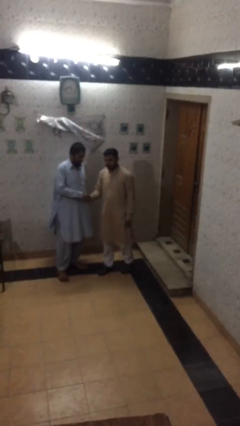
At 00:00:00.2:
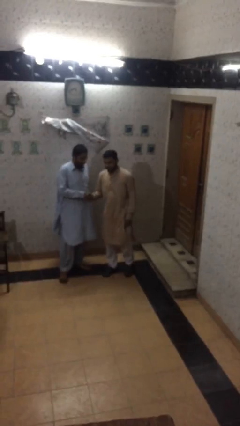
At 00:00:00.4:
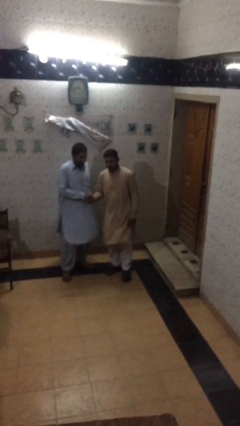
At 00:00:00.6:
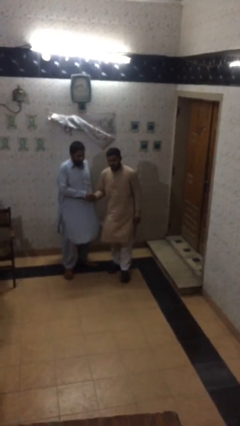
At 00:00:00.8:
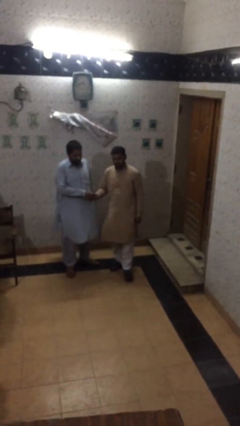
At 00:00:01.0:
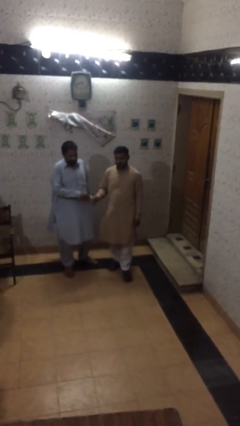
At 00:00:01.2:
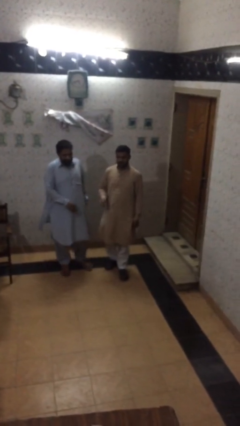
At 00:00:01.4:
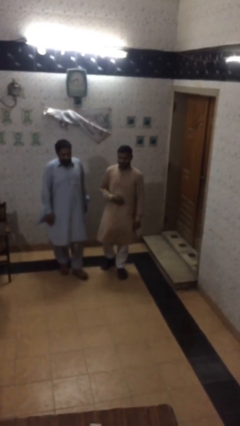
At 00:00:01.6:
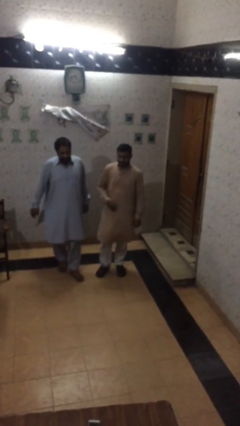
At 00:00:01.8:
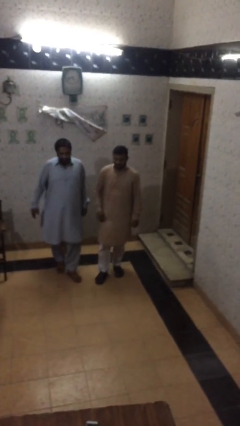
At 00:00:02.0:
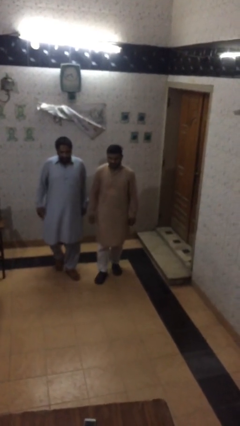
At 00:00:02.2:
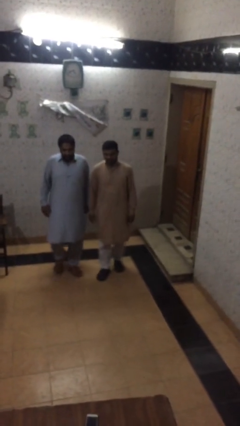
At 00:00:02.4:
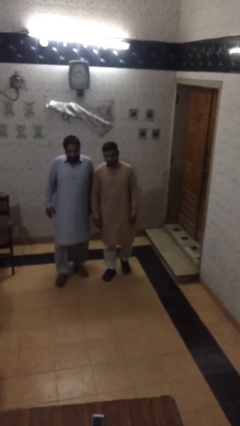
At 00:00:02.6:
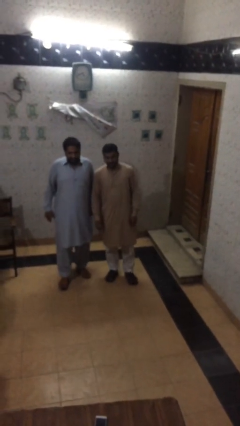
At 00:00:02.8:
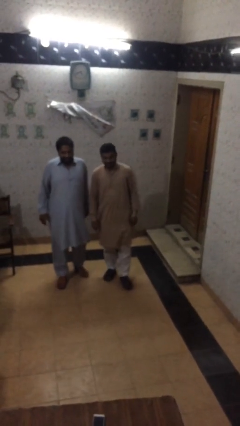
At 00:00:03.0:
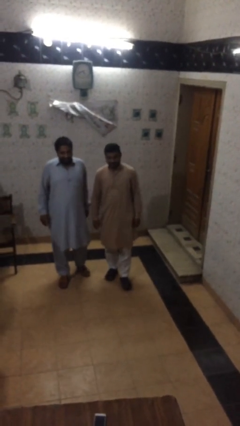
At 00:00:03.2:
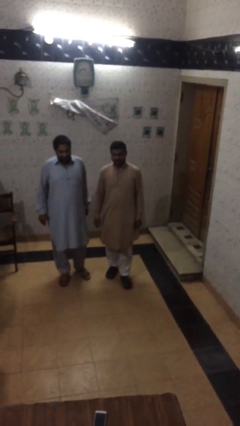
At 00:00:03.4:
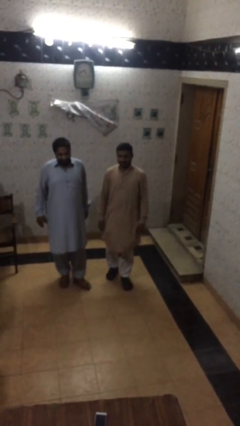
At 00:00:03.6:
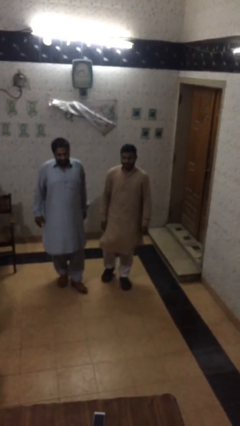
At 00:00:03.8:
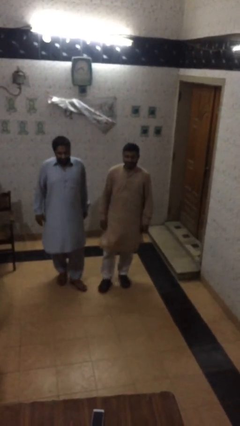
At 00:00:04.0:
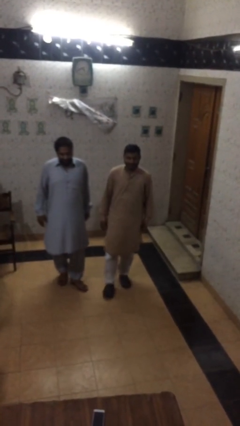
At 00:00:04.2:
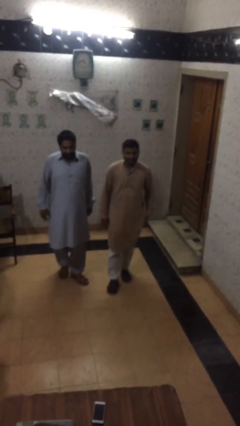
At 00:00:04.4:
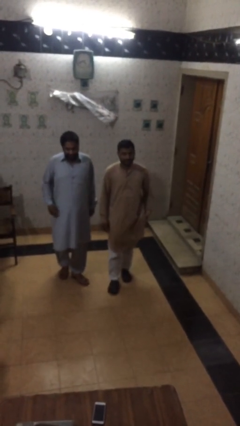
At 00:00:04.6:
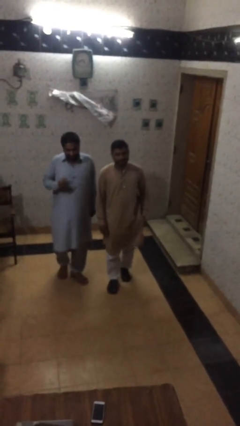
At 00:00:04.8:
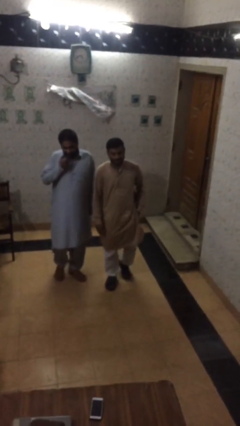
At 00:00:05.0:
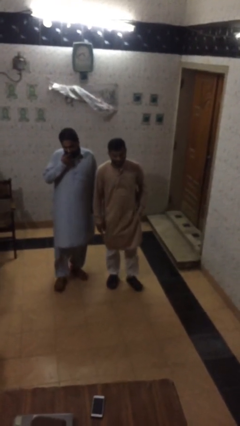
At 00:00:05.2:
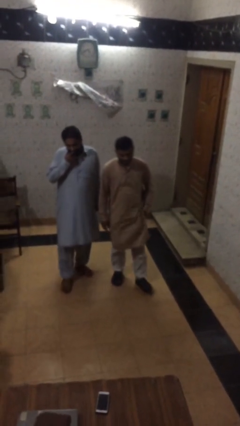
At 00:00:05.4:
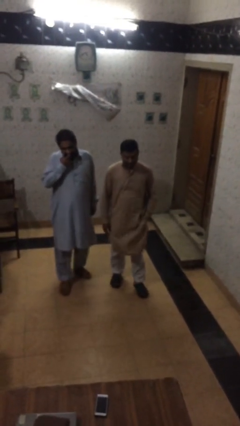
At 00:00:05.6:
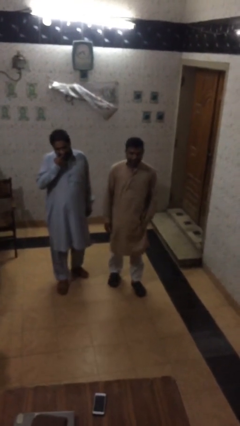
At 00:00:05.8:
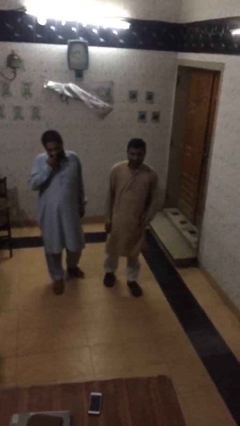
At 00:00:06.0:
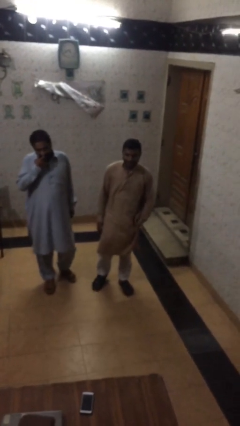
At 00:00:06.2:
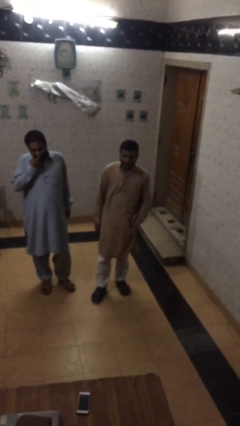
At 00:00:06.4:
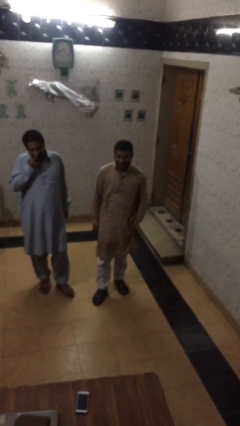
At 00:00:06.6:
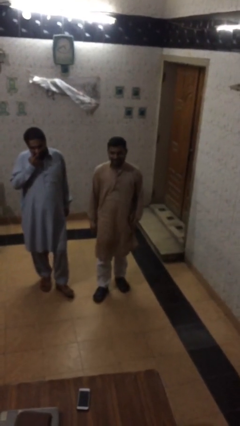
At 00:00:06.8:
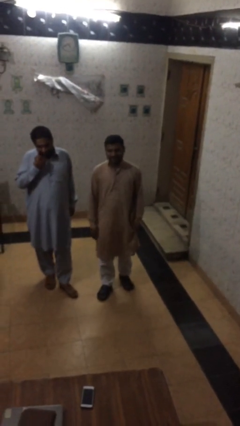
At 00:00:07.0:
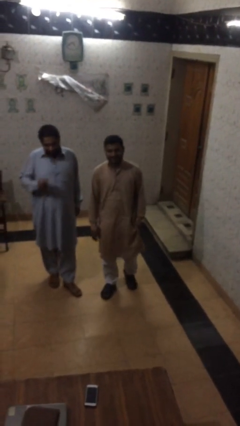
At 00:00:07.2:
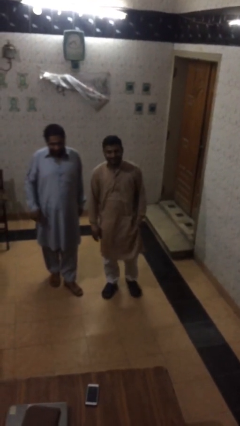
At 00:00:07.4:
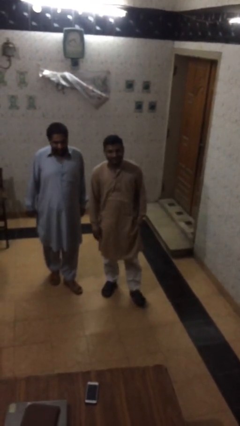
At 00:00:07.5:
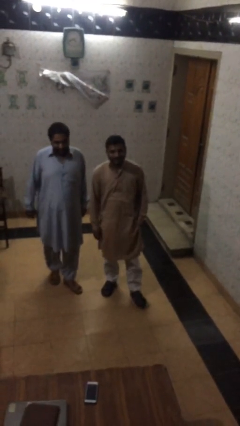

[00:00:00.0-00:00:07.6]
person talks to person

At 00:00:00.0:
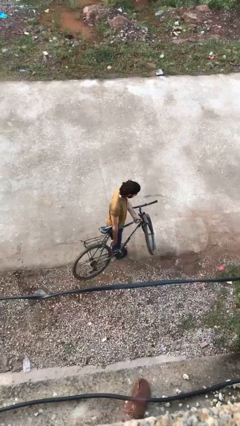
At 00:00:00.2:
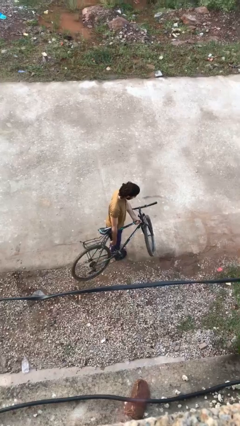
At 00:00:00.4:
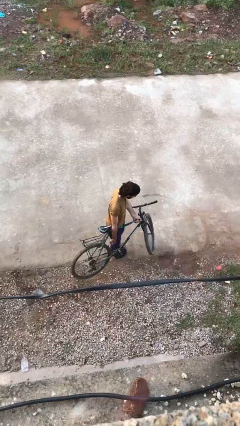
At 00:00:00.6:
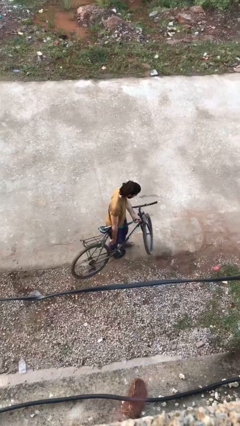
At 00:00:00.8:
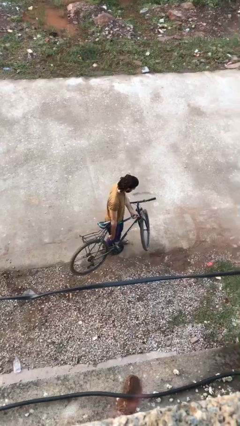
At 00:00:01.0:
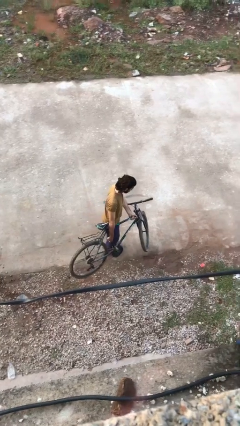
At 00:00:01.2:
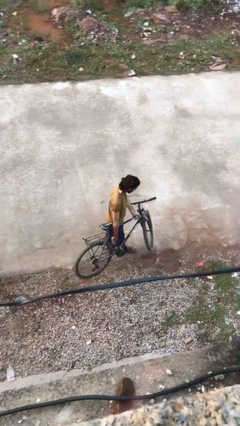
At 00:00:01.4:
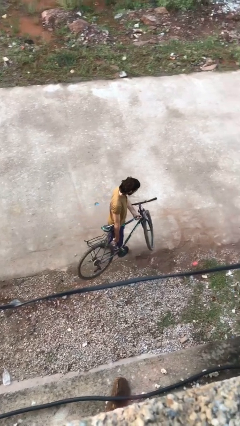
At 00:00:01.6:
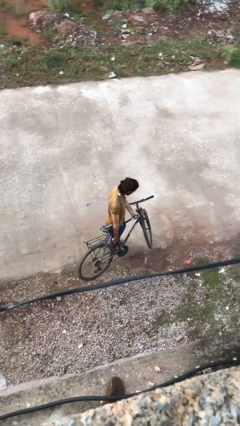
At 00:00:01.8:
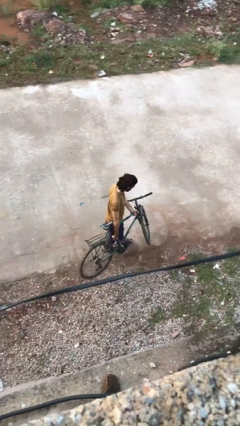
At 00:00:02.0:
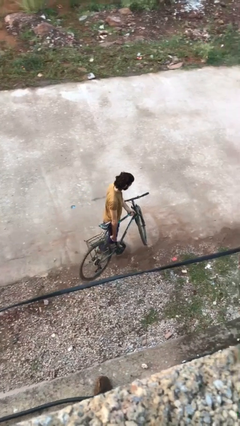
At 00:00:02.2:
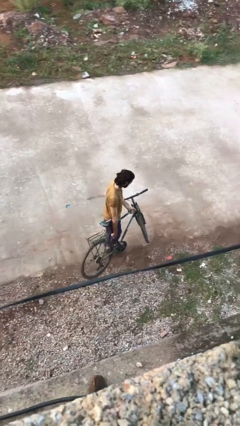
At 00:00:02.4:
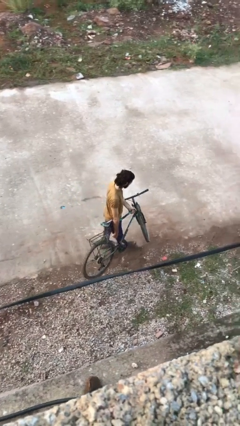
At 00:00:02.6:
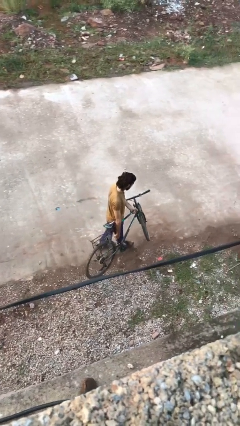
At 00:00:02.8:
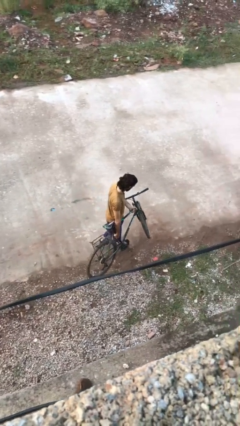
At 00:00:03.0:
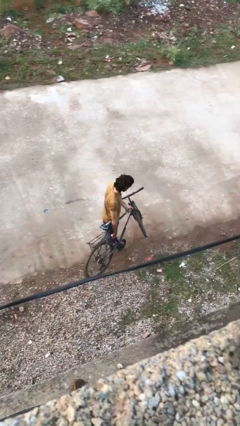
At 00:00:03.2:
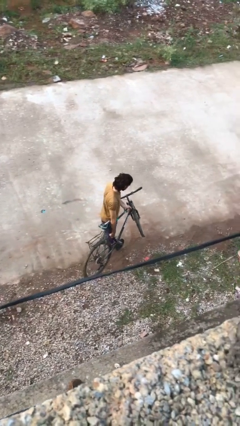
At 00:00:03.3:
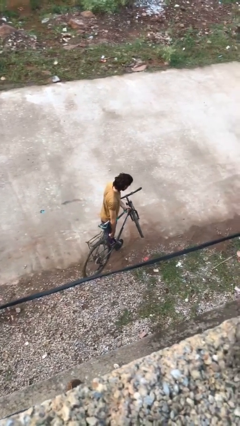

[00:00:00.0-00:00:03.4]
person carries bicycle

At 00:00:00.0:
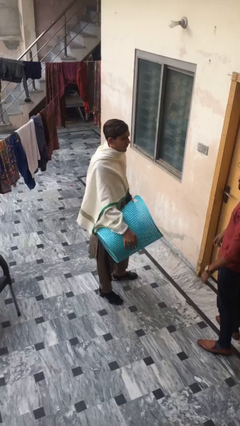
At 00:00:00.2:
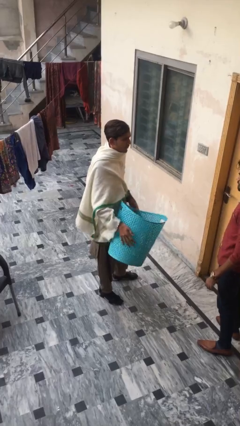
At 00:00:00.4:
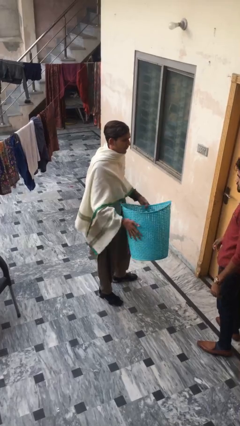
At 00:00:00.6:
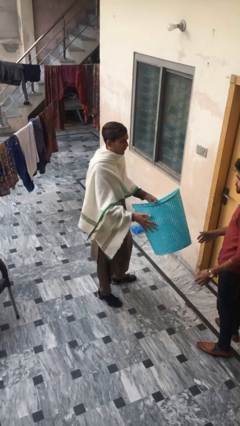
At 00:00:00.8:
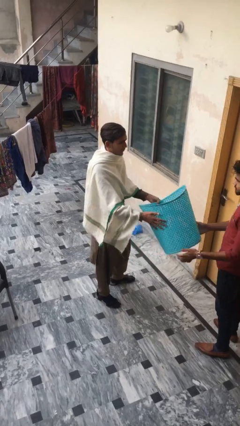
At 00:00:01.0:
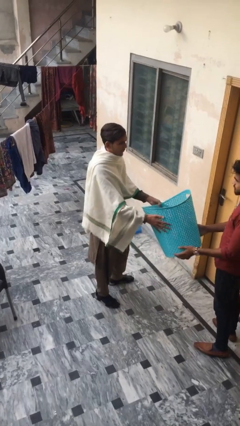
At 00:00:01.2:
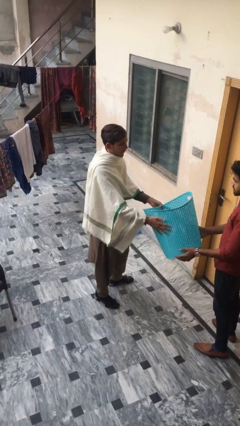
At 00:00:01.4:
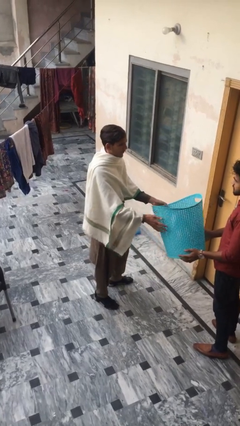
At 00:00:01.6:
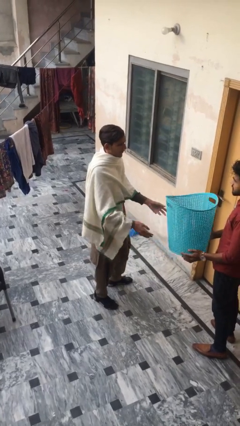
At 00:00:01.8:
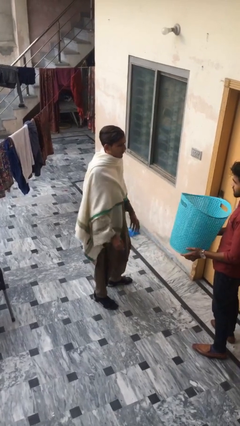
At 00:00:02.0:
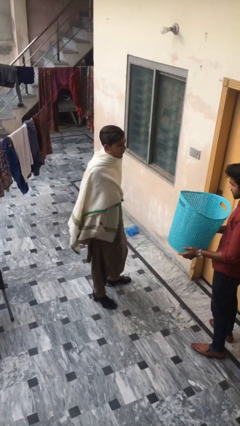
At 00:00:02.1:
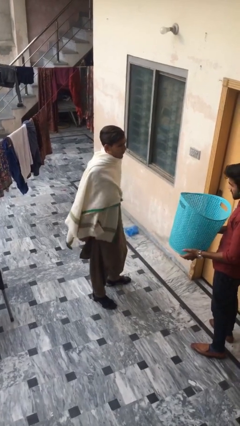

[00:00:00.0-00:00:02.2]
person transfers object to person

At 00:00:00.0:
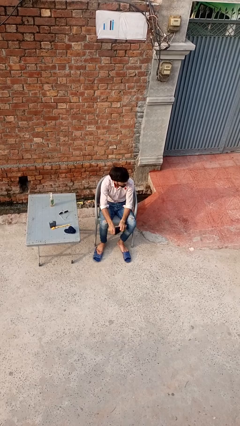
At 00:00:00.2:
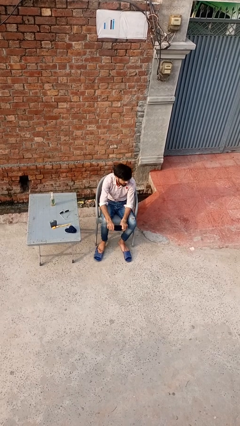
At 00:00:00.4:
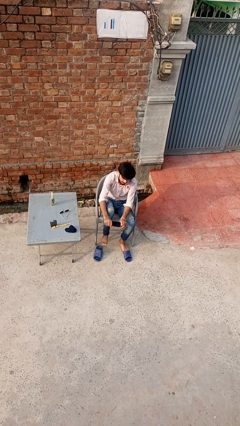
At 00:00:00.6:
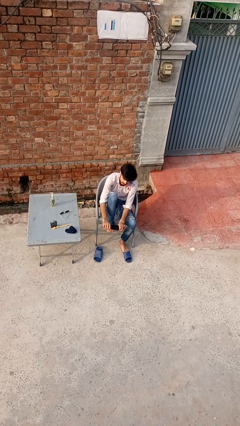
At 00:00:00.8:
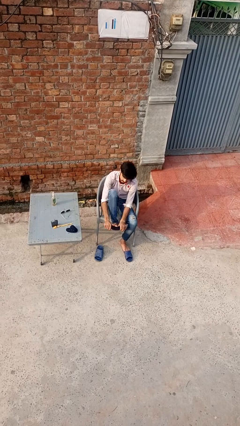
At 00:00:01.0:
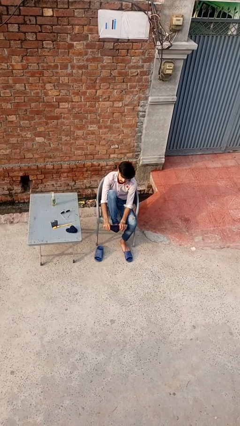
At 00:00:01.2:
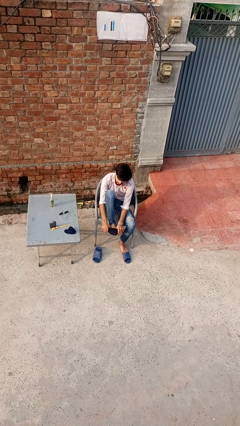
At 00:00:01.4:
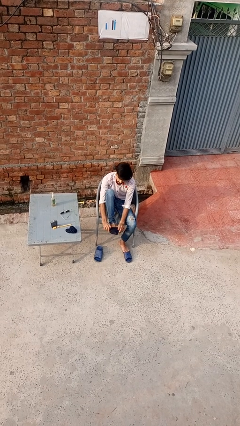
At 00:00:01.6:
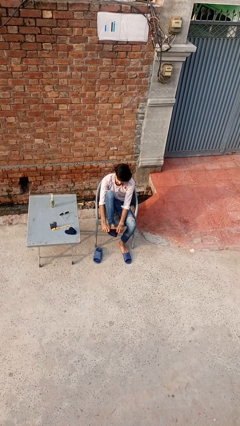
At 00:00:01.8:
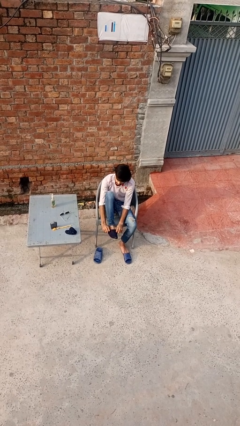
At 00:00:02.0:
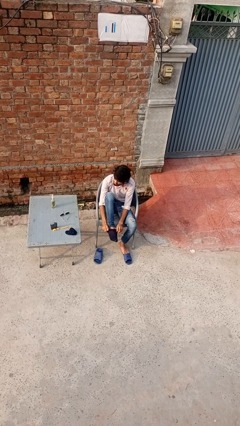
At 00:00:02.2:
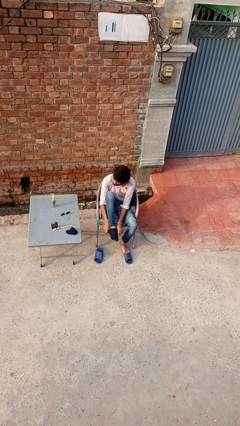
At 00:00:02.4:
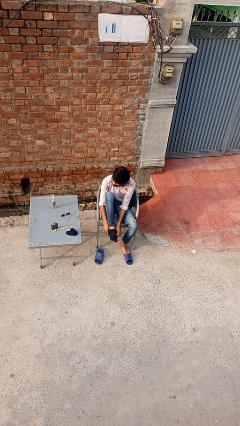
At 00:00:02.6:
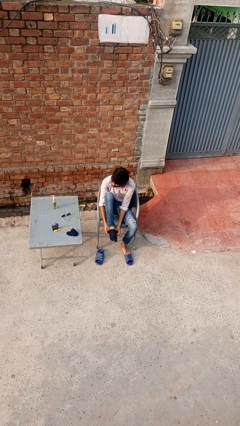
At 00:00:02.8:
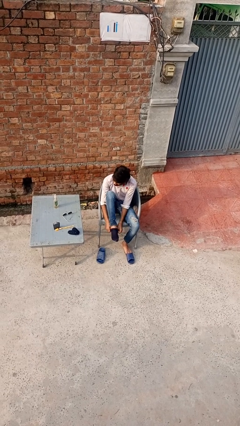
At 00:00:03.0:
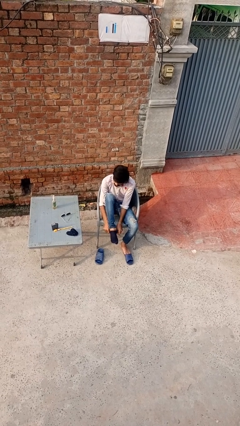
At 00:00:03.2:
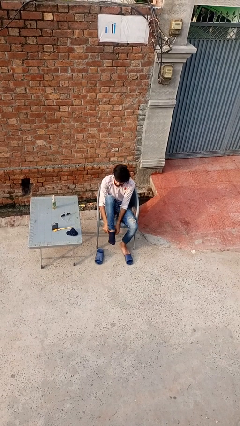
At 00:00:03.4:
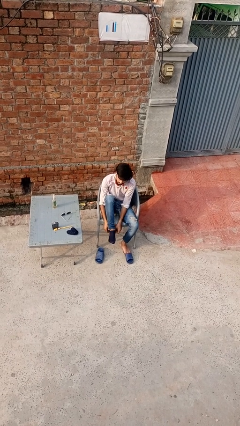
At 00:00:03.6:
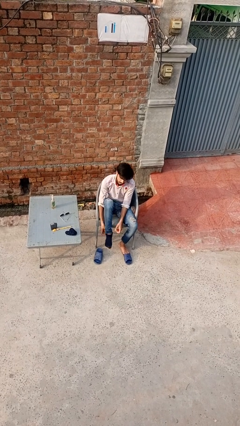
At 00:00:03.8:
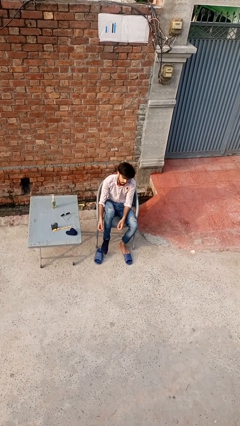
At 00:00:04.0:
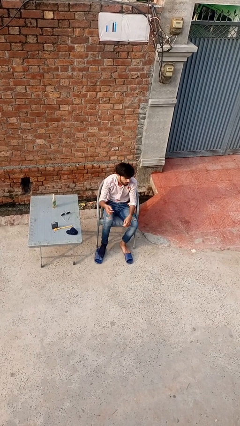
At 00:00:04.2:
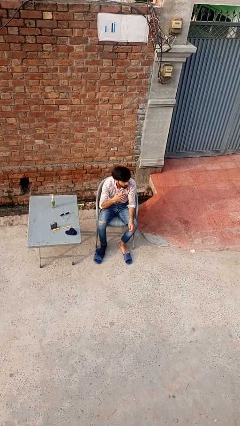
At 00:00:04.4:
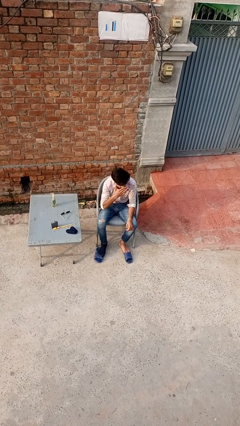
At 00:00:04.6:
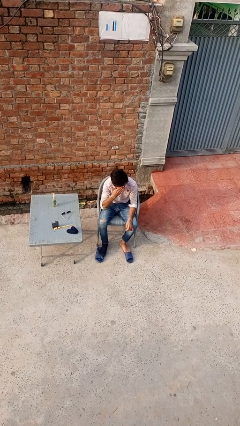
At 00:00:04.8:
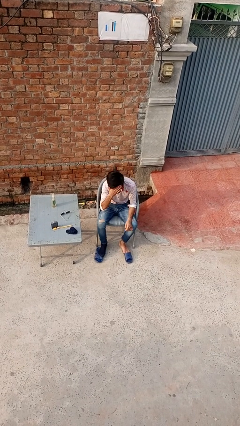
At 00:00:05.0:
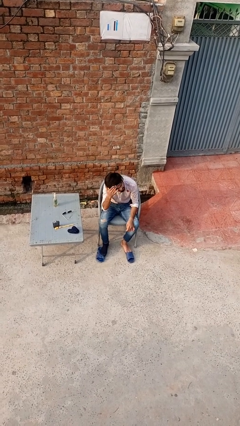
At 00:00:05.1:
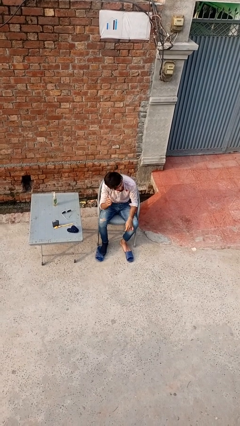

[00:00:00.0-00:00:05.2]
person puts on socks
